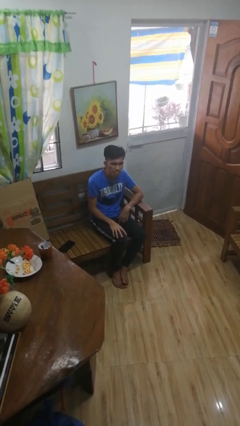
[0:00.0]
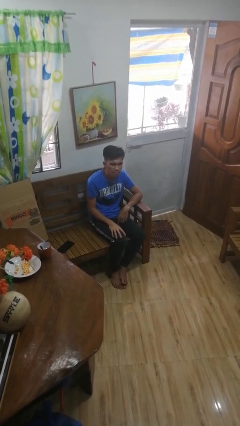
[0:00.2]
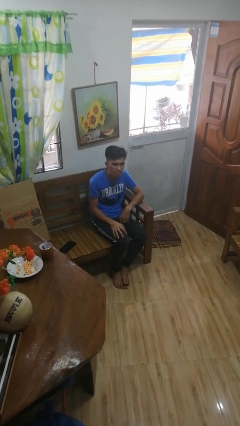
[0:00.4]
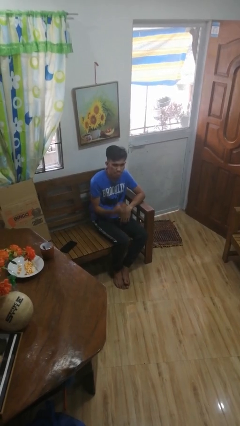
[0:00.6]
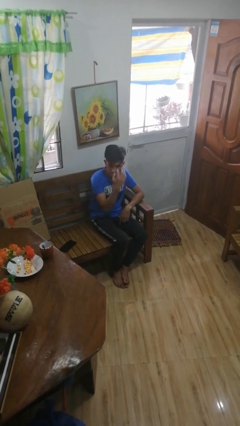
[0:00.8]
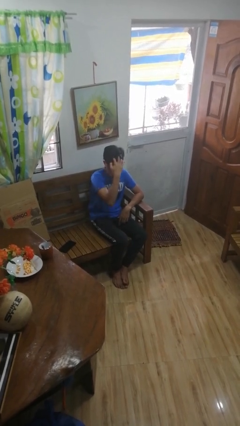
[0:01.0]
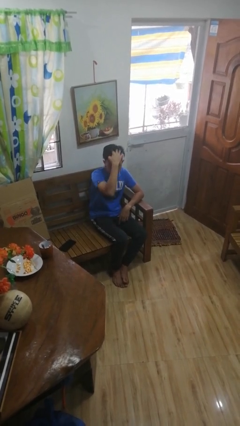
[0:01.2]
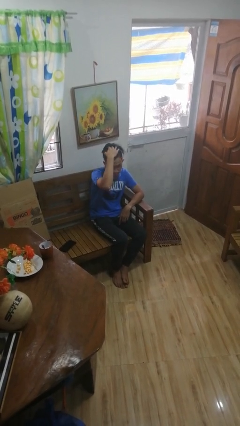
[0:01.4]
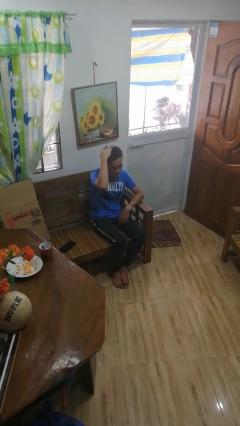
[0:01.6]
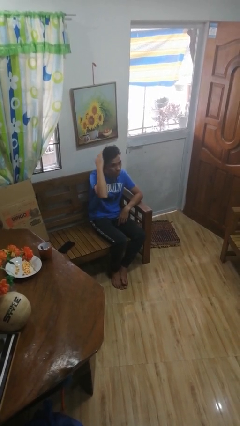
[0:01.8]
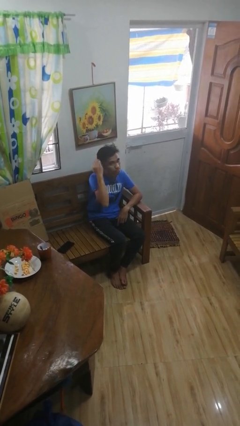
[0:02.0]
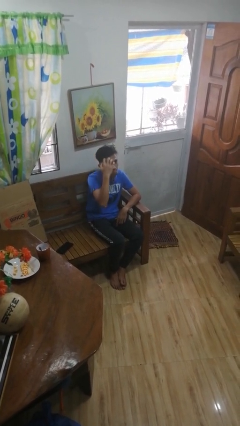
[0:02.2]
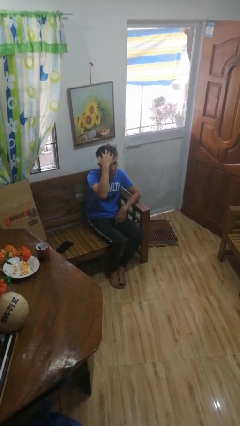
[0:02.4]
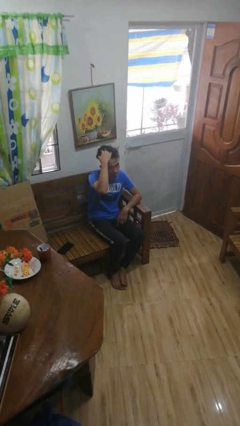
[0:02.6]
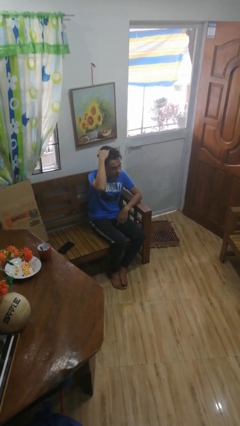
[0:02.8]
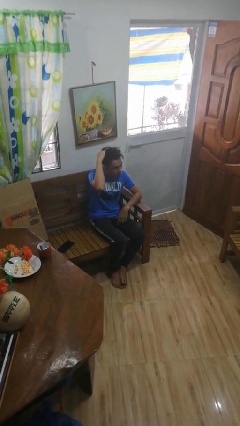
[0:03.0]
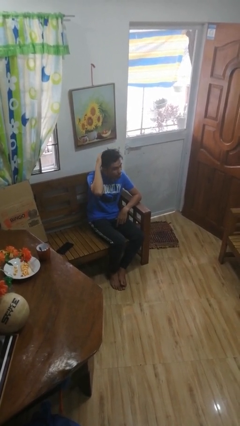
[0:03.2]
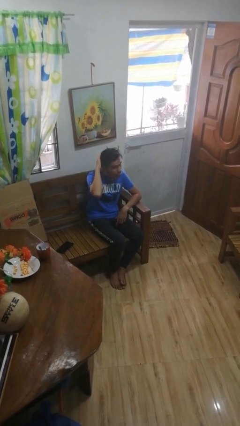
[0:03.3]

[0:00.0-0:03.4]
person strokes hair

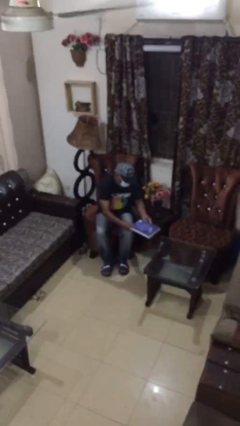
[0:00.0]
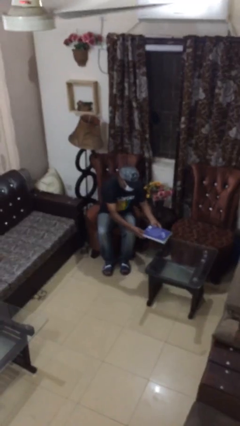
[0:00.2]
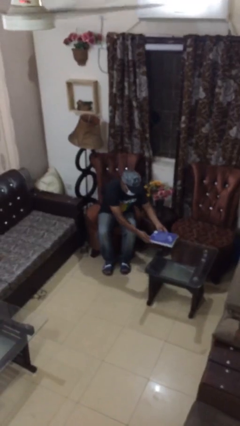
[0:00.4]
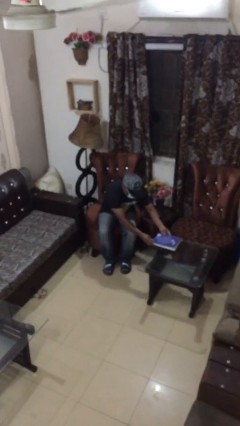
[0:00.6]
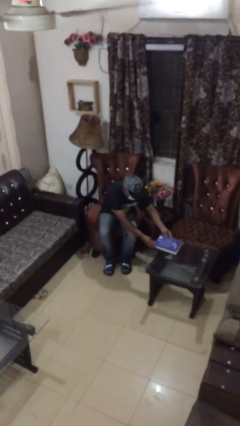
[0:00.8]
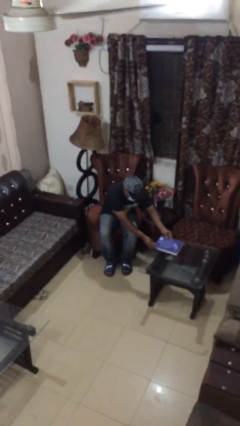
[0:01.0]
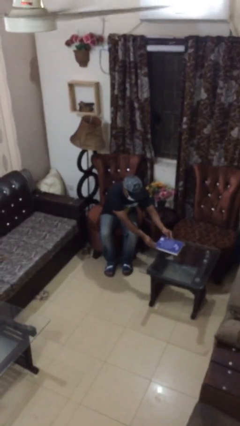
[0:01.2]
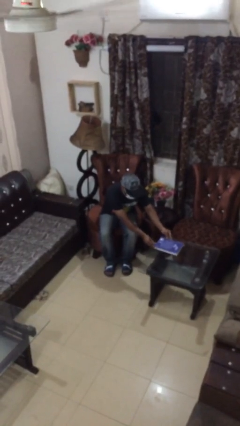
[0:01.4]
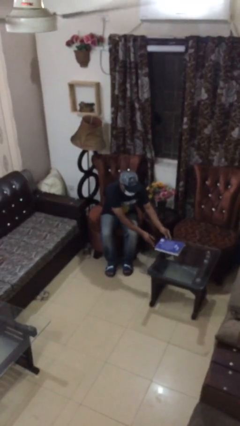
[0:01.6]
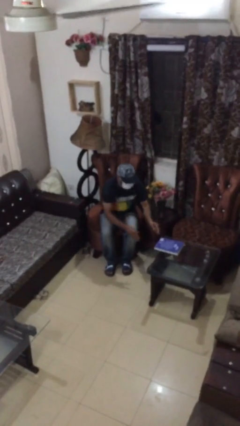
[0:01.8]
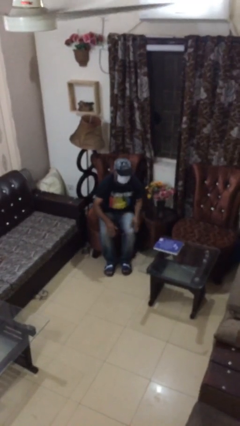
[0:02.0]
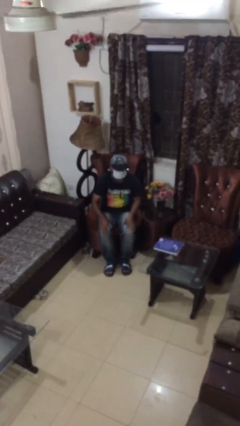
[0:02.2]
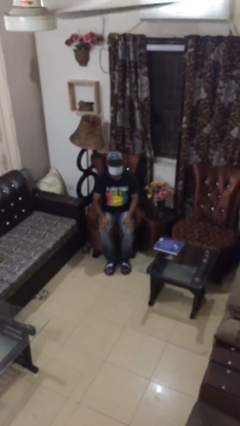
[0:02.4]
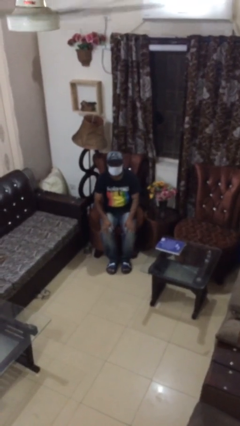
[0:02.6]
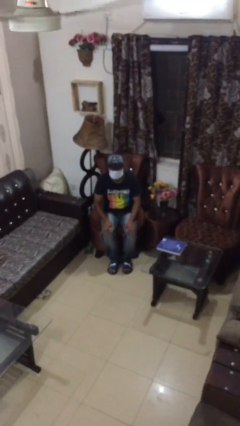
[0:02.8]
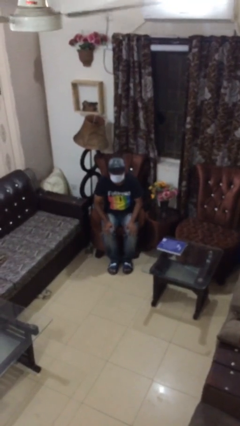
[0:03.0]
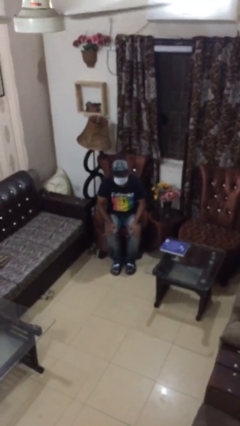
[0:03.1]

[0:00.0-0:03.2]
person puts down object on table

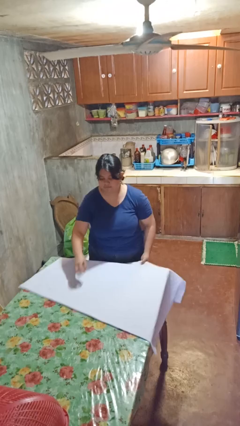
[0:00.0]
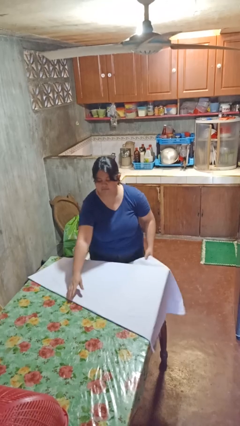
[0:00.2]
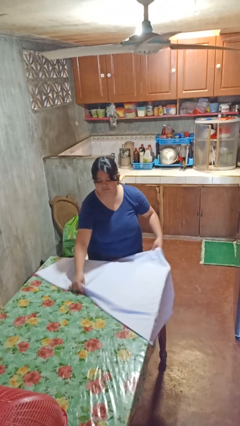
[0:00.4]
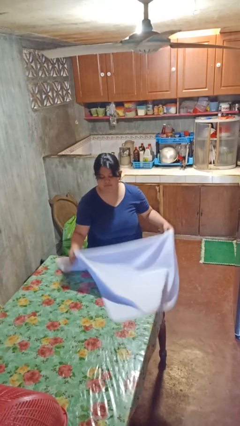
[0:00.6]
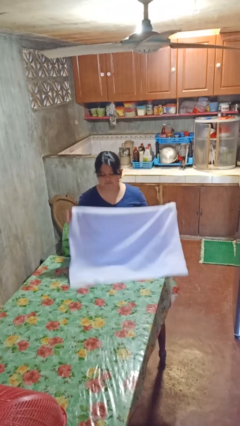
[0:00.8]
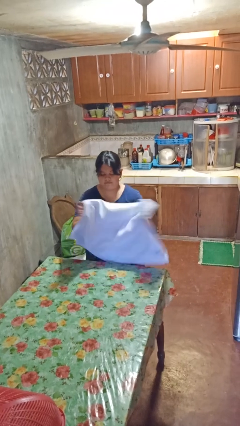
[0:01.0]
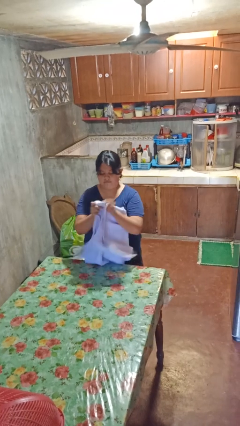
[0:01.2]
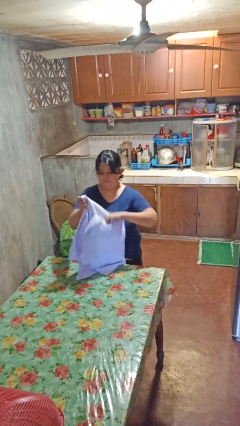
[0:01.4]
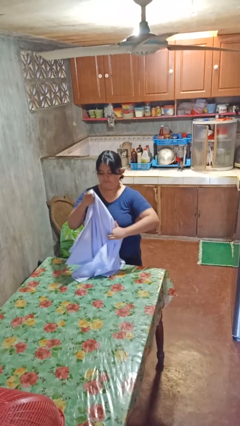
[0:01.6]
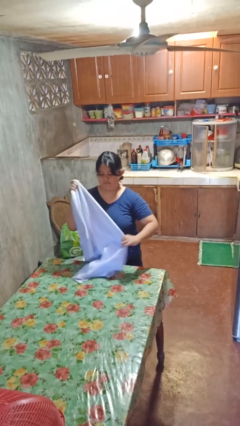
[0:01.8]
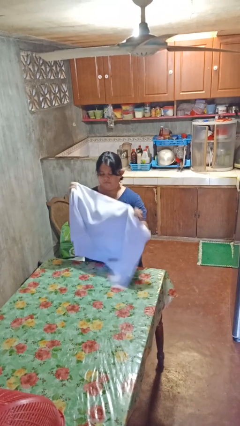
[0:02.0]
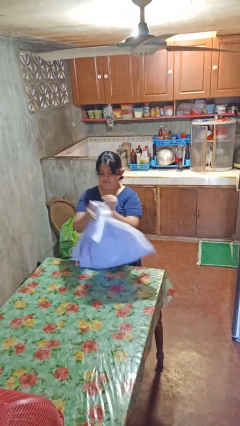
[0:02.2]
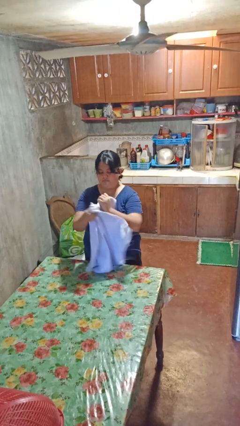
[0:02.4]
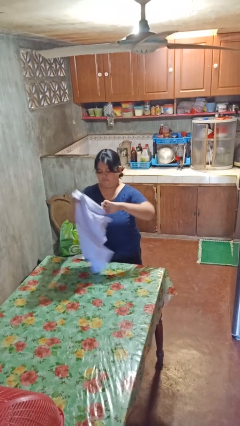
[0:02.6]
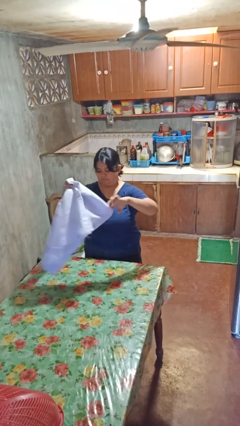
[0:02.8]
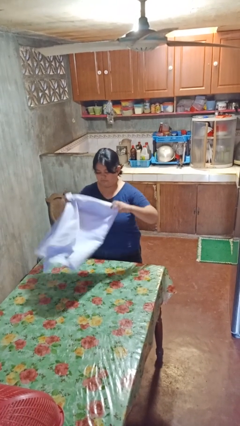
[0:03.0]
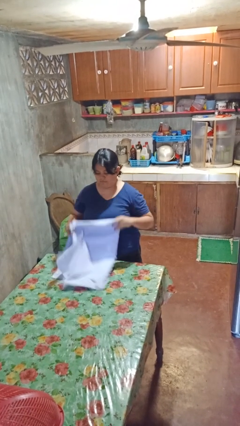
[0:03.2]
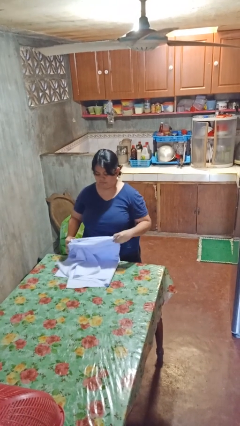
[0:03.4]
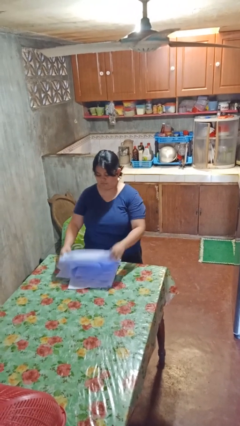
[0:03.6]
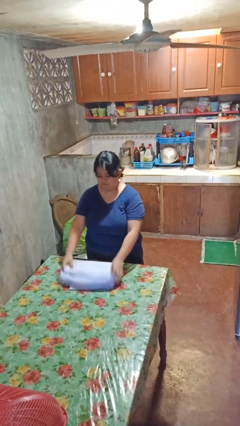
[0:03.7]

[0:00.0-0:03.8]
person folds tablecloth

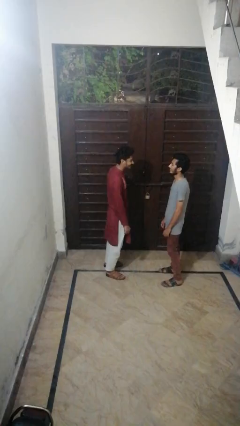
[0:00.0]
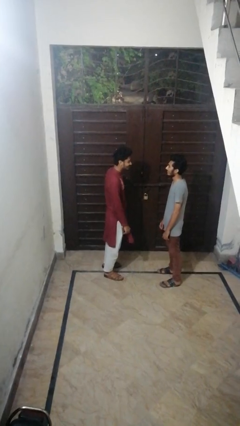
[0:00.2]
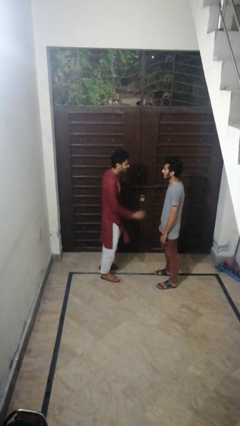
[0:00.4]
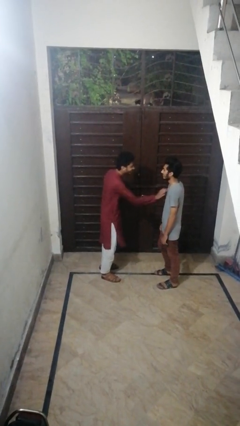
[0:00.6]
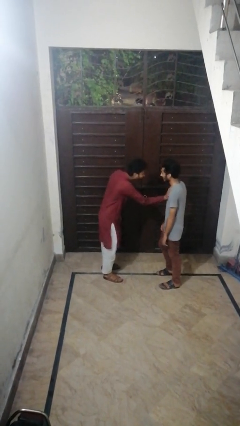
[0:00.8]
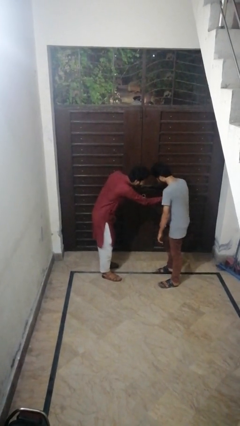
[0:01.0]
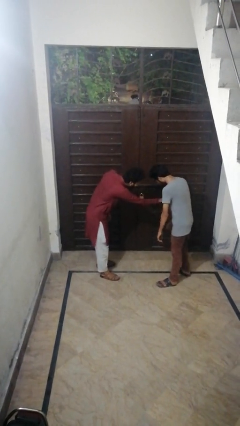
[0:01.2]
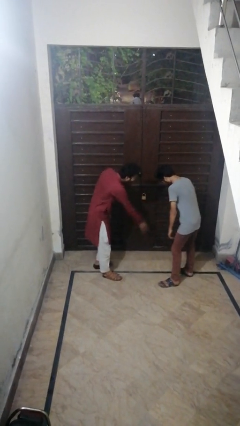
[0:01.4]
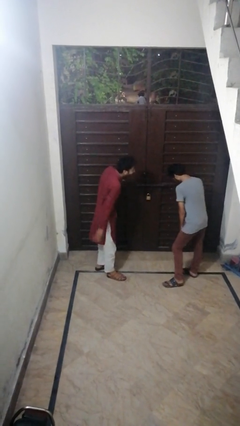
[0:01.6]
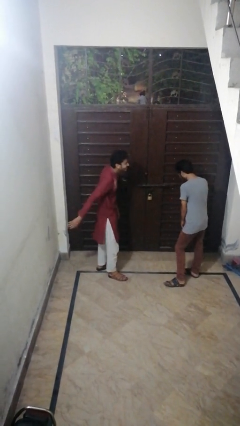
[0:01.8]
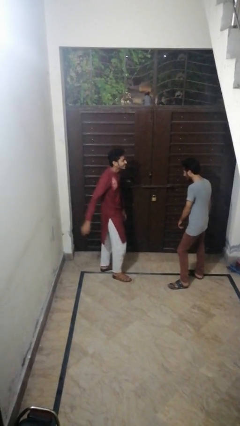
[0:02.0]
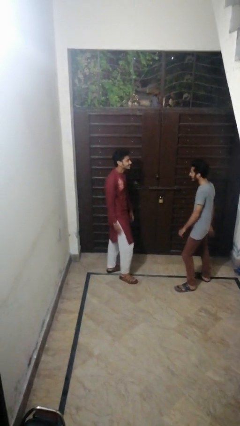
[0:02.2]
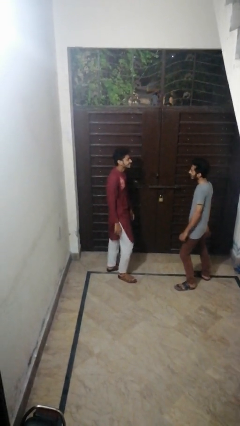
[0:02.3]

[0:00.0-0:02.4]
person shoves person

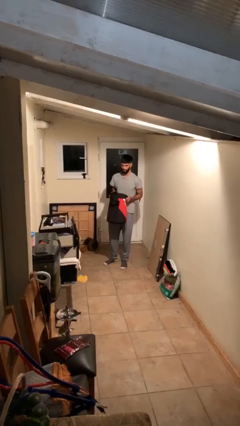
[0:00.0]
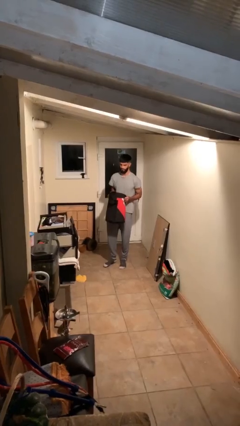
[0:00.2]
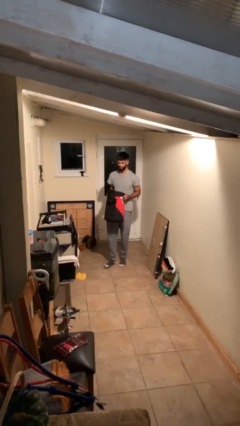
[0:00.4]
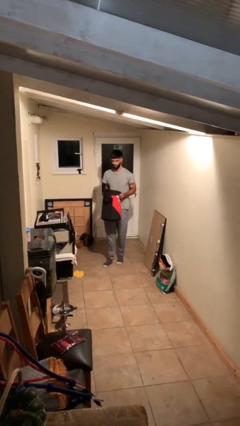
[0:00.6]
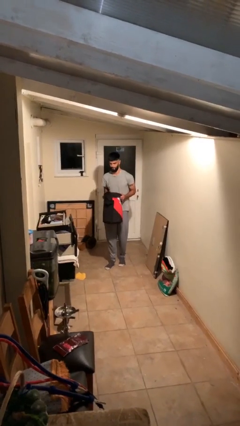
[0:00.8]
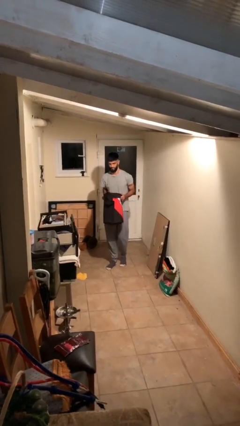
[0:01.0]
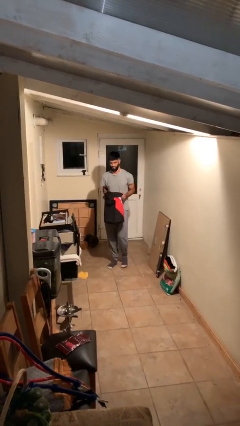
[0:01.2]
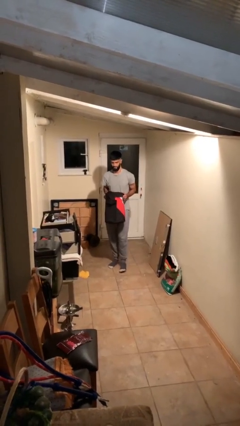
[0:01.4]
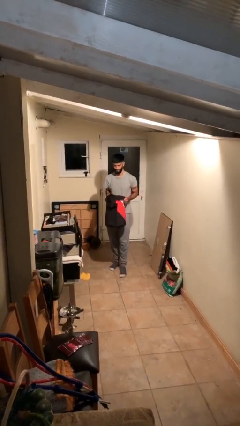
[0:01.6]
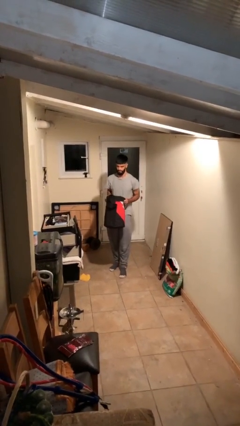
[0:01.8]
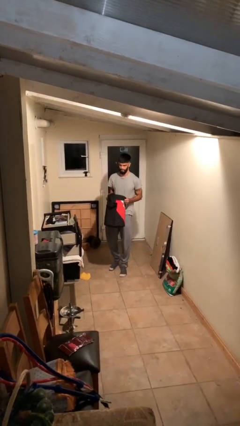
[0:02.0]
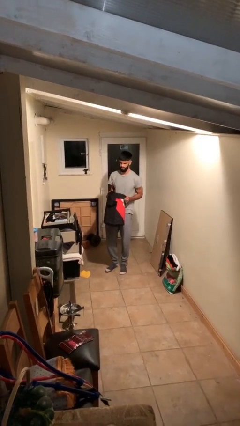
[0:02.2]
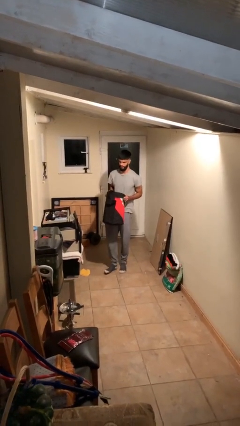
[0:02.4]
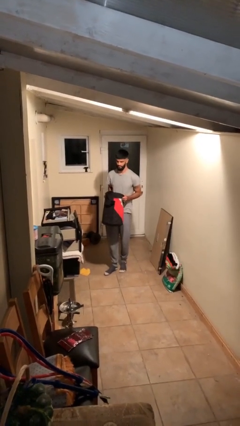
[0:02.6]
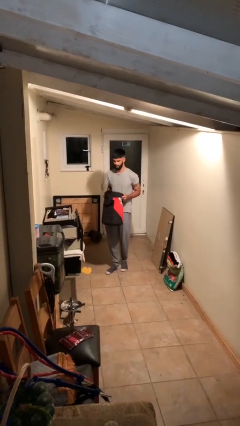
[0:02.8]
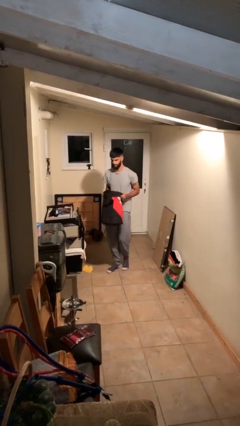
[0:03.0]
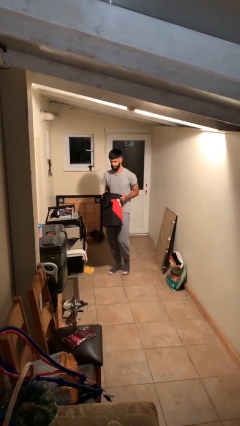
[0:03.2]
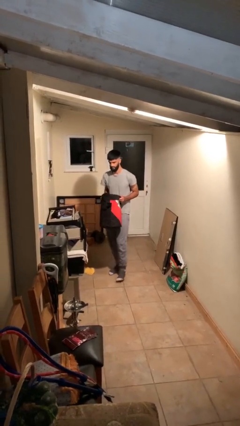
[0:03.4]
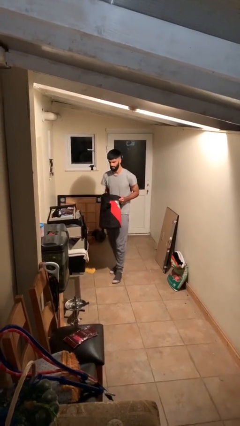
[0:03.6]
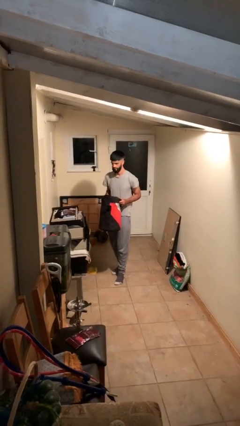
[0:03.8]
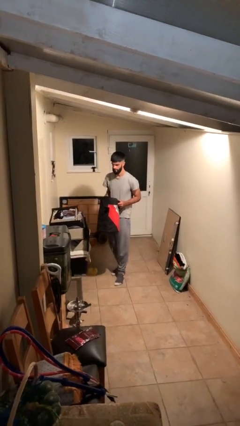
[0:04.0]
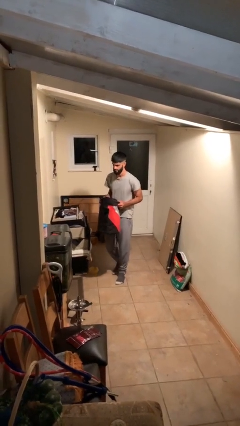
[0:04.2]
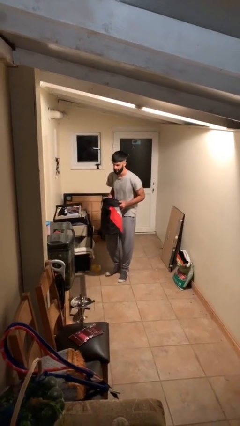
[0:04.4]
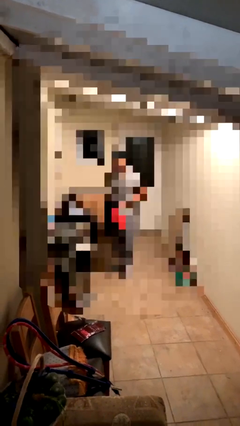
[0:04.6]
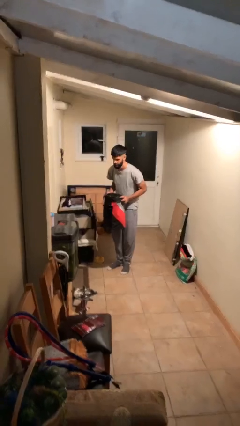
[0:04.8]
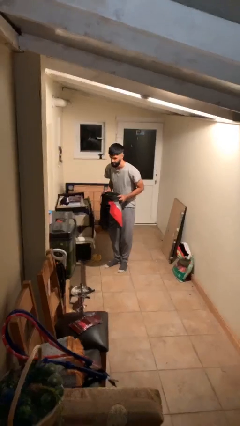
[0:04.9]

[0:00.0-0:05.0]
person carries heavy object
